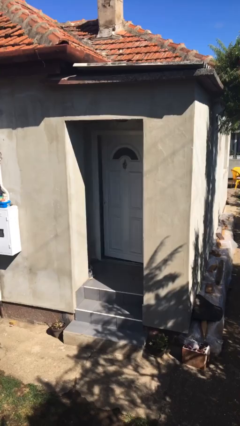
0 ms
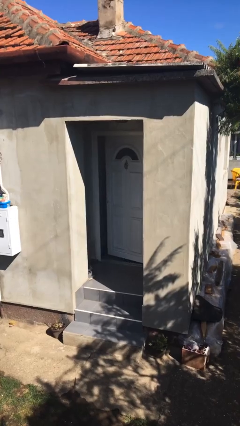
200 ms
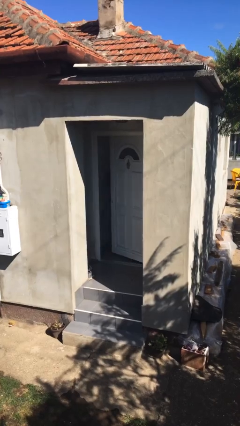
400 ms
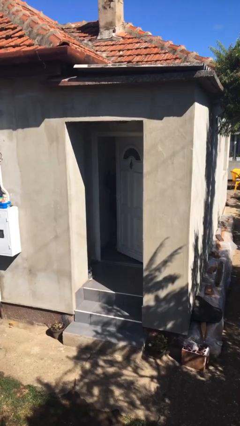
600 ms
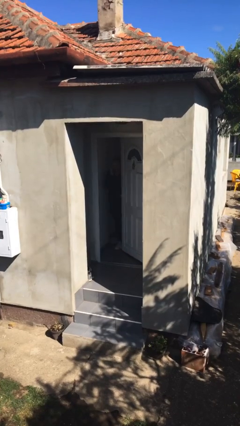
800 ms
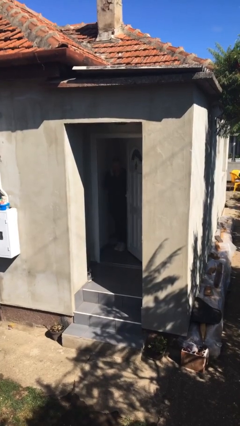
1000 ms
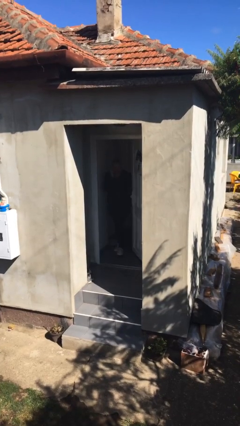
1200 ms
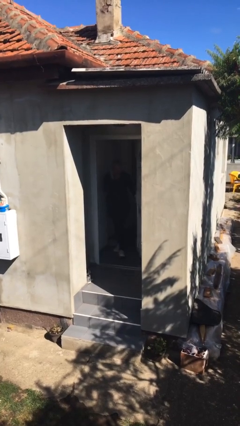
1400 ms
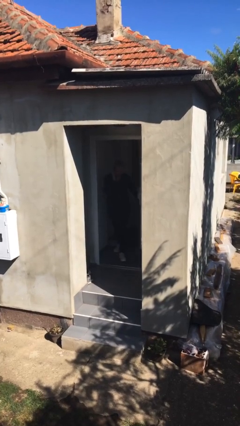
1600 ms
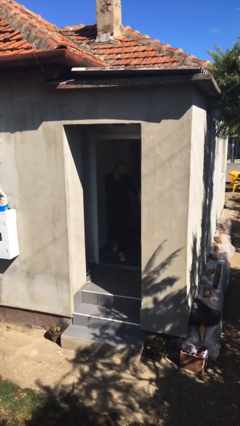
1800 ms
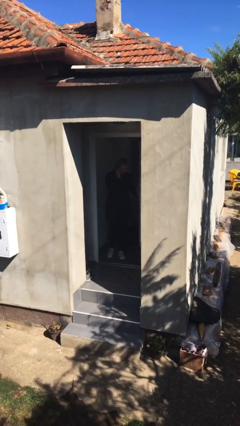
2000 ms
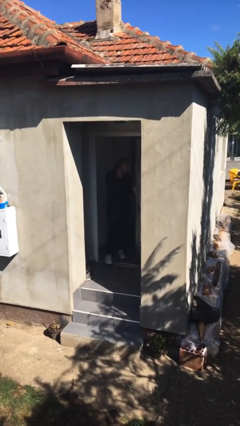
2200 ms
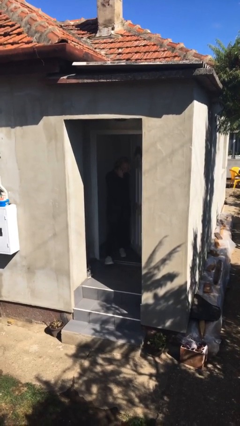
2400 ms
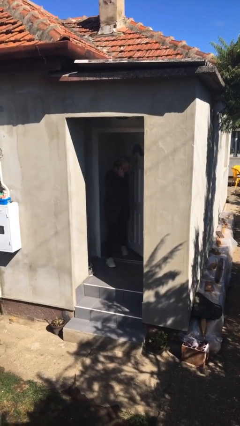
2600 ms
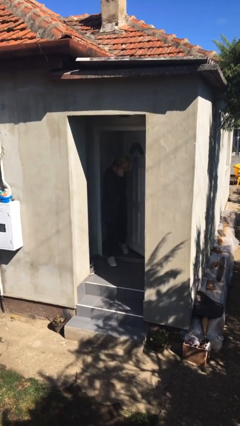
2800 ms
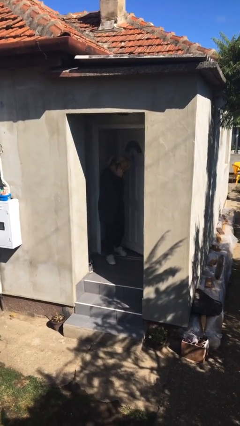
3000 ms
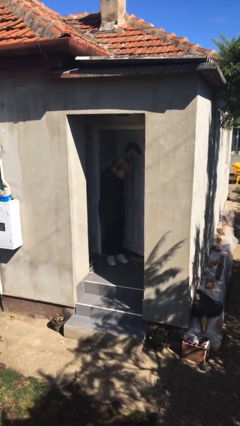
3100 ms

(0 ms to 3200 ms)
person opens facility door

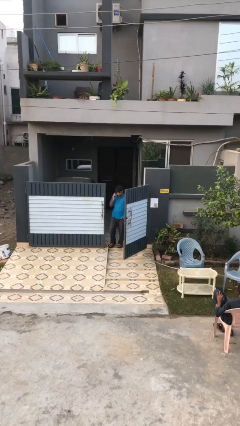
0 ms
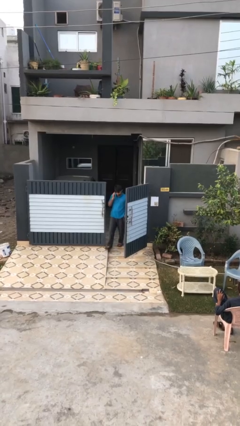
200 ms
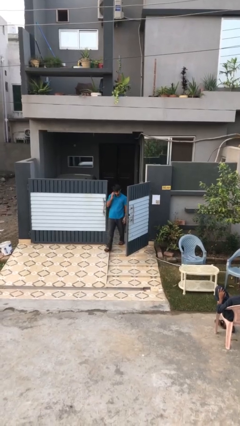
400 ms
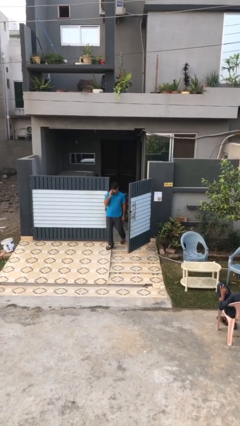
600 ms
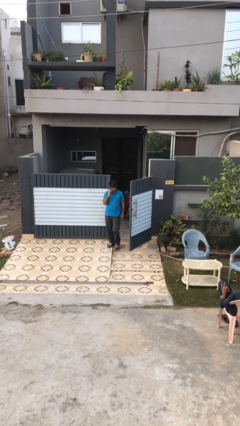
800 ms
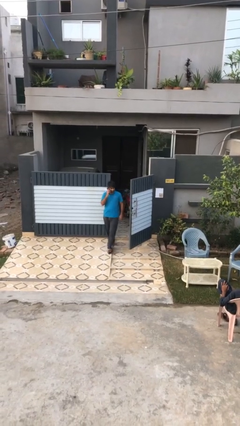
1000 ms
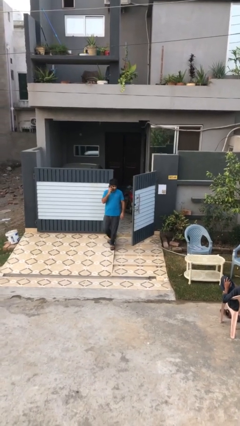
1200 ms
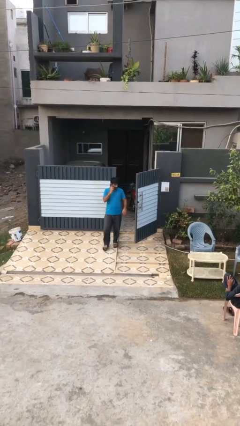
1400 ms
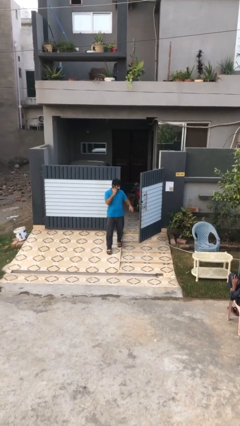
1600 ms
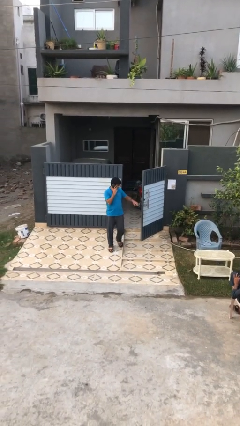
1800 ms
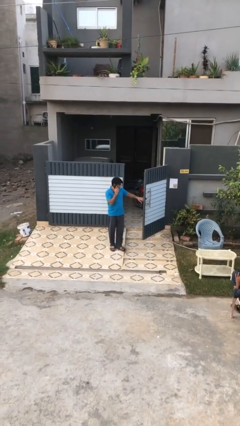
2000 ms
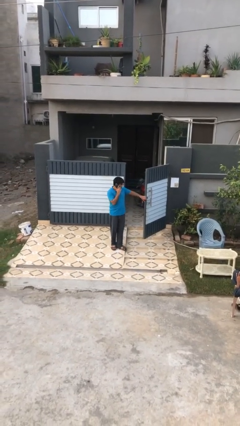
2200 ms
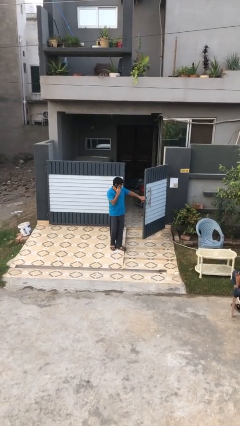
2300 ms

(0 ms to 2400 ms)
person enters scene through structure

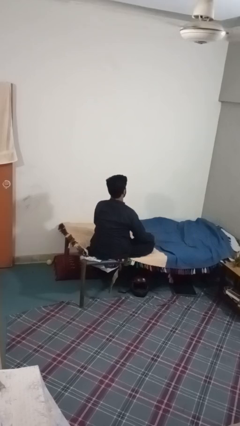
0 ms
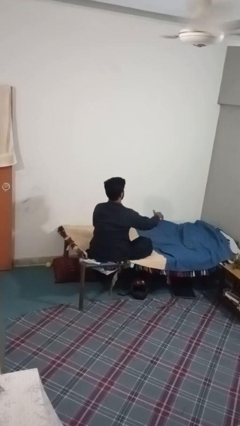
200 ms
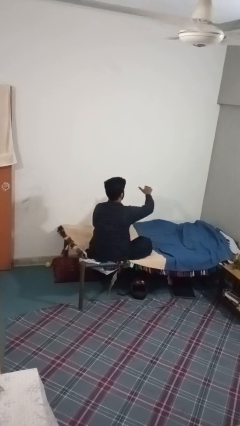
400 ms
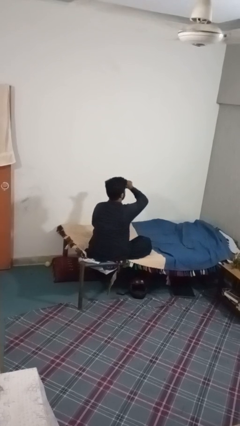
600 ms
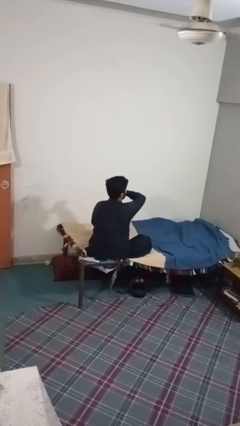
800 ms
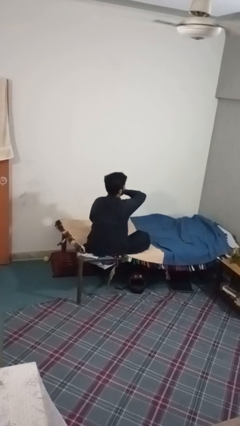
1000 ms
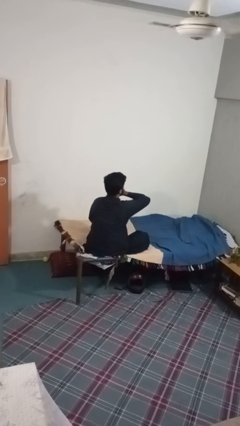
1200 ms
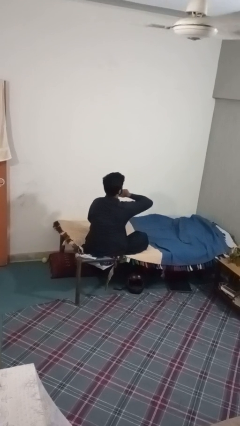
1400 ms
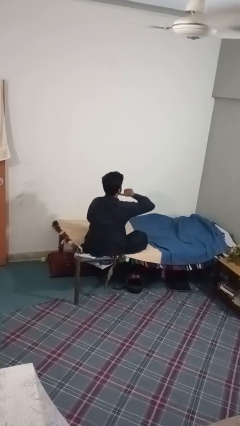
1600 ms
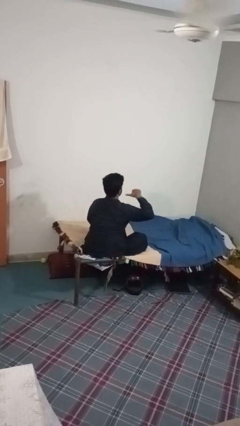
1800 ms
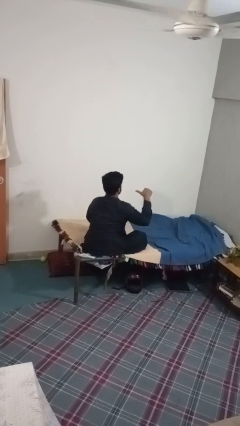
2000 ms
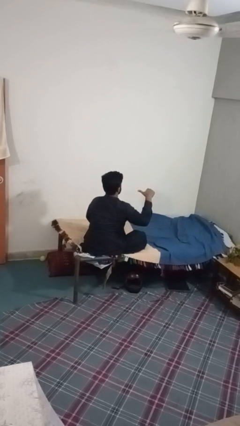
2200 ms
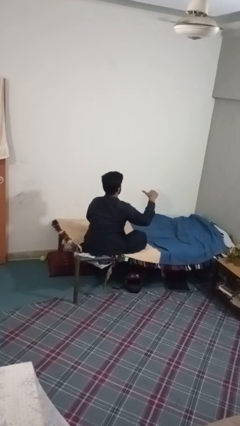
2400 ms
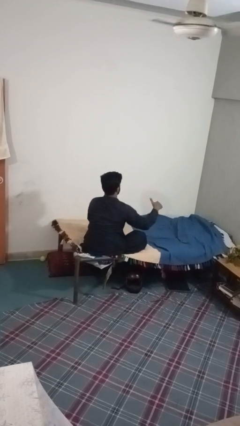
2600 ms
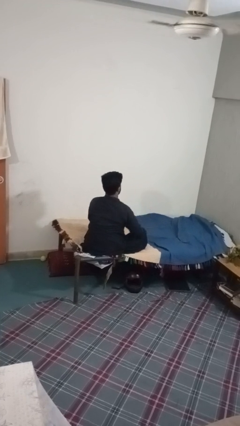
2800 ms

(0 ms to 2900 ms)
person gestures cut

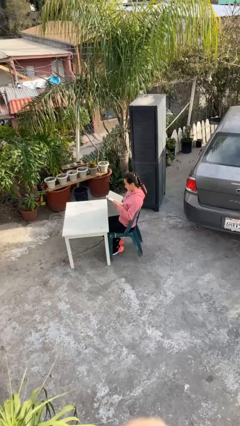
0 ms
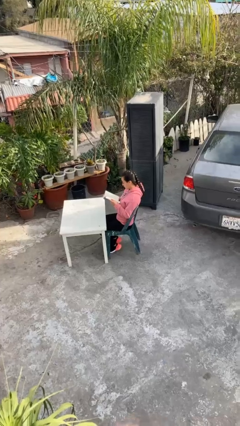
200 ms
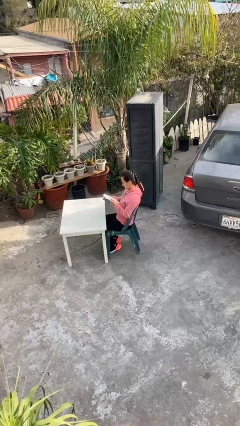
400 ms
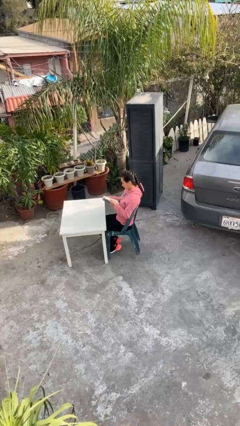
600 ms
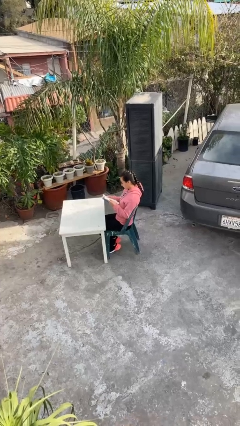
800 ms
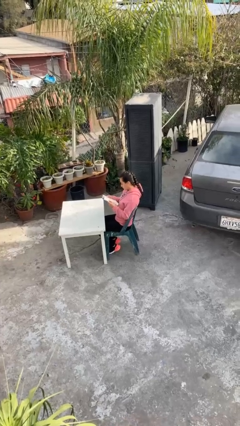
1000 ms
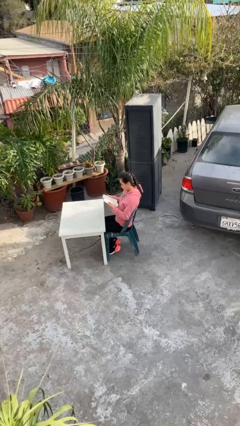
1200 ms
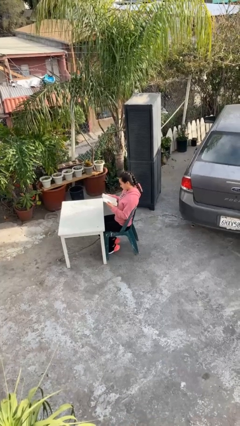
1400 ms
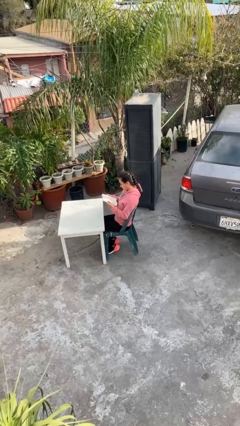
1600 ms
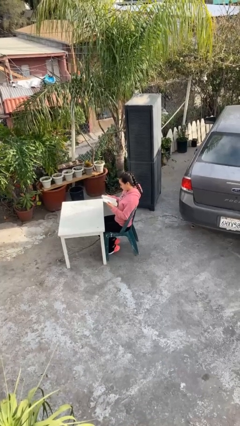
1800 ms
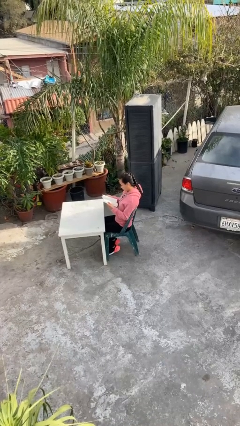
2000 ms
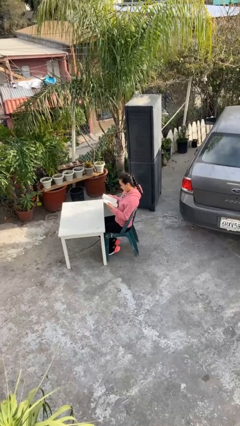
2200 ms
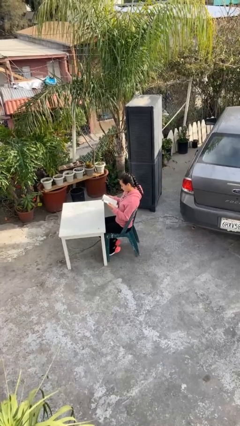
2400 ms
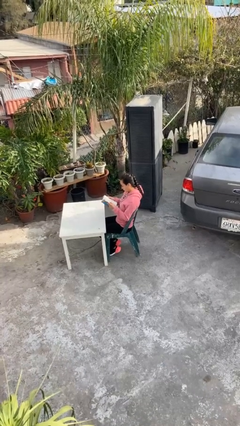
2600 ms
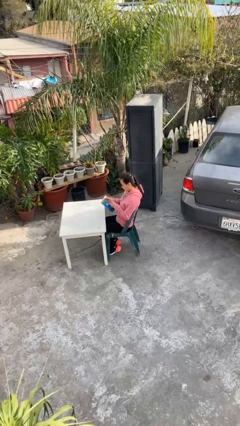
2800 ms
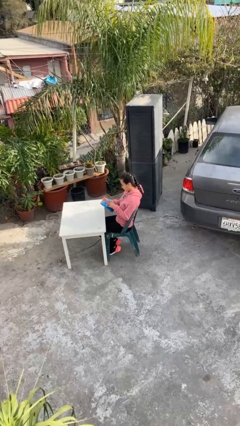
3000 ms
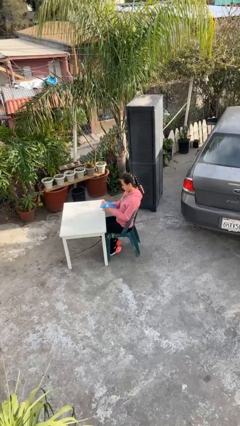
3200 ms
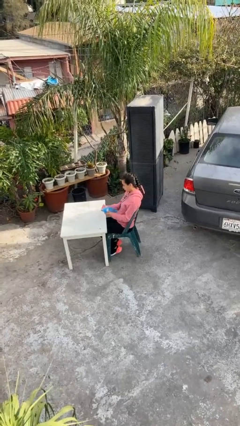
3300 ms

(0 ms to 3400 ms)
person reads document

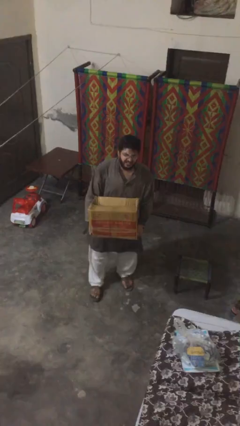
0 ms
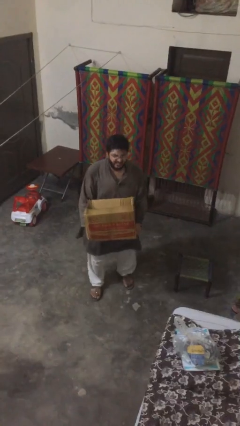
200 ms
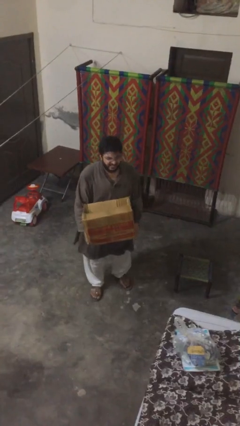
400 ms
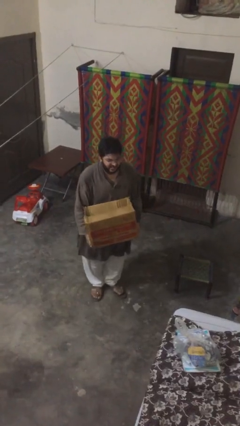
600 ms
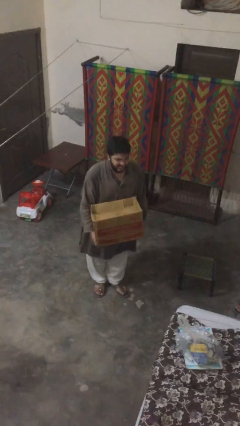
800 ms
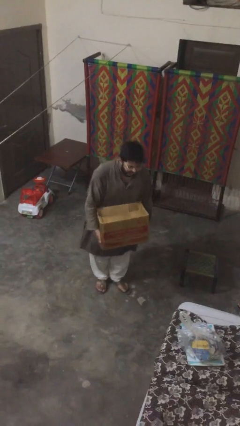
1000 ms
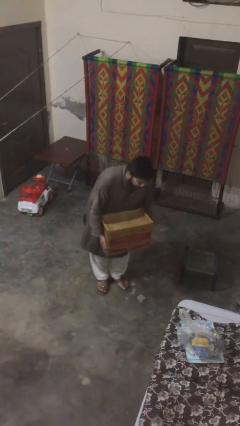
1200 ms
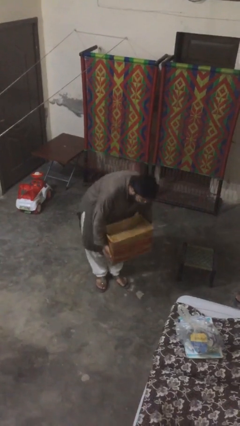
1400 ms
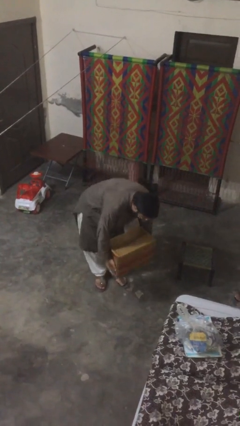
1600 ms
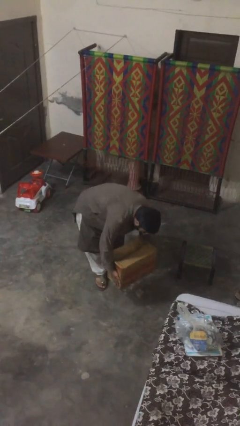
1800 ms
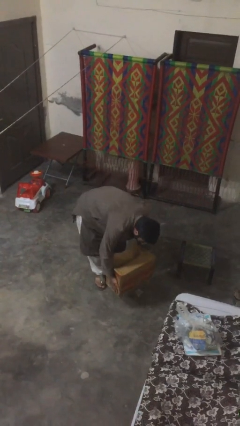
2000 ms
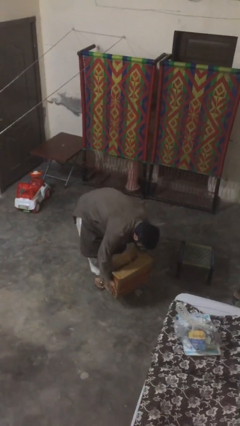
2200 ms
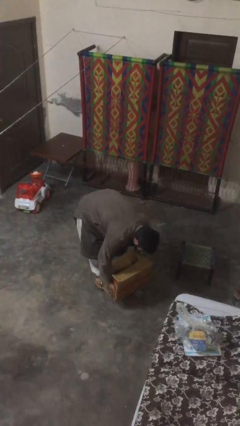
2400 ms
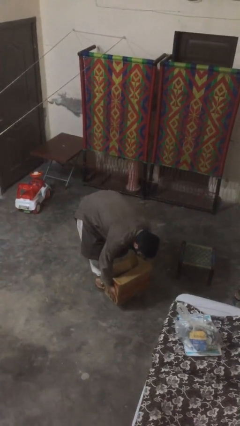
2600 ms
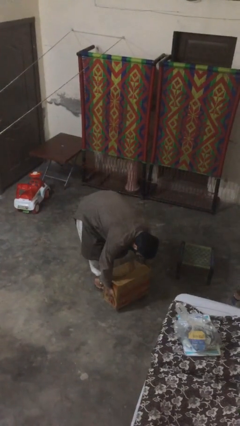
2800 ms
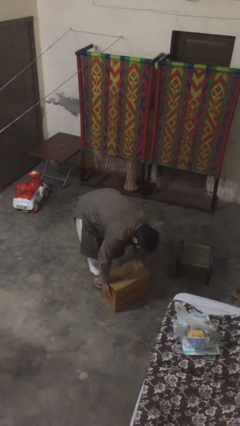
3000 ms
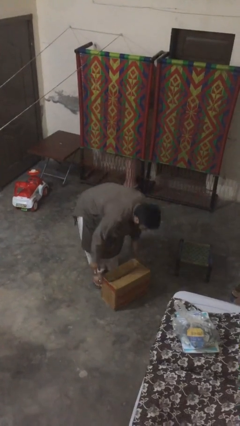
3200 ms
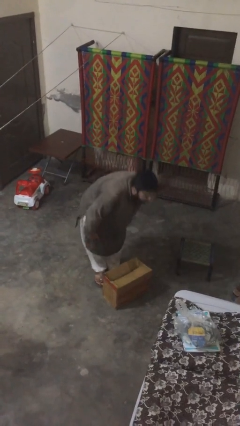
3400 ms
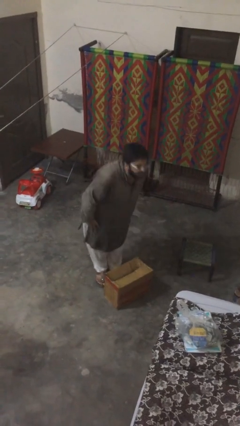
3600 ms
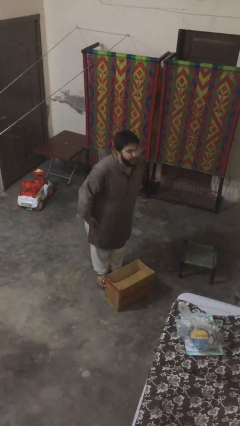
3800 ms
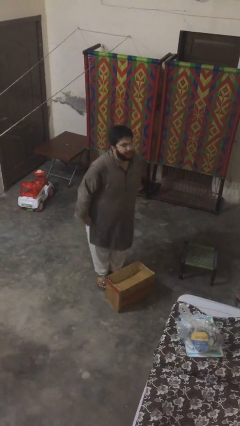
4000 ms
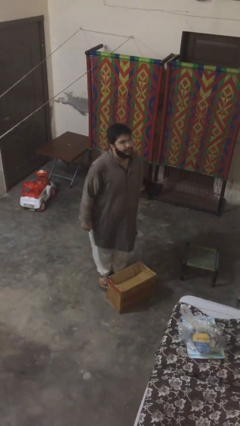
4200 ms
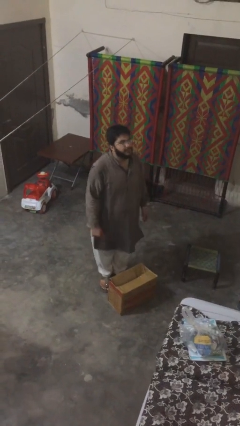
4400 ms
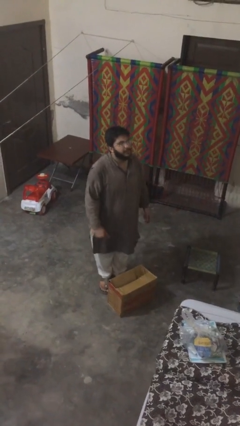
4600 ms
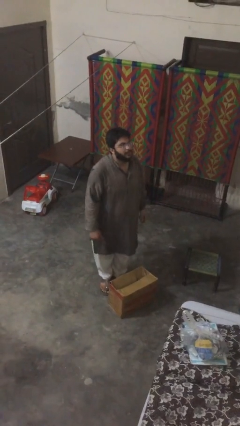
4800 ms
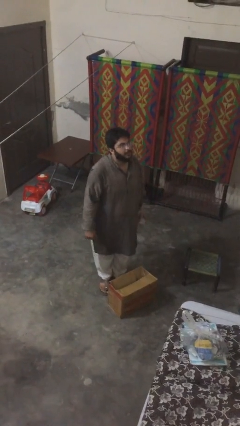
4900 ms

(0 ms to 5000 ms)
person puts down object on floor

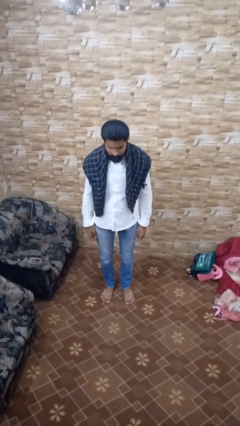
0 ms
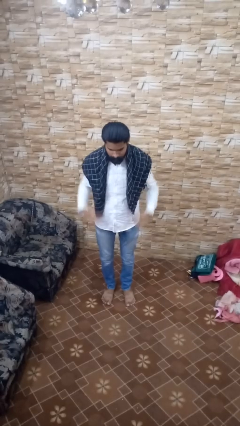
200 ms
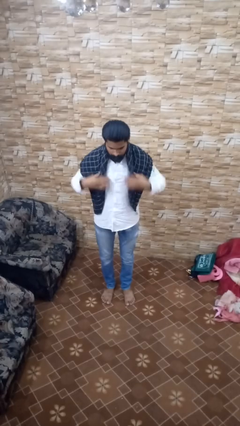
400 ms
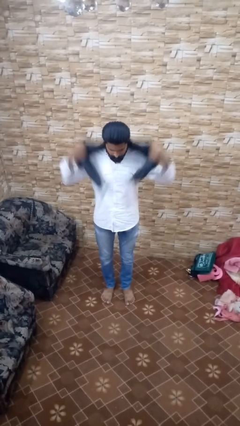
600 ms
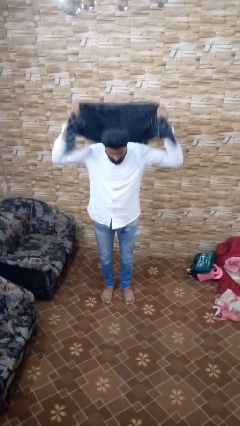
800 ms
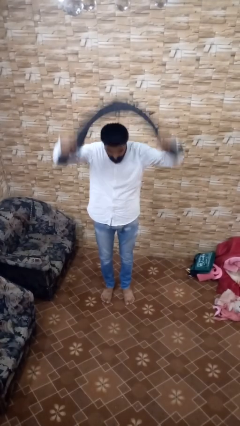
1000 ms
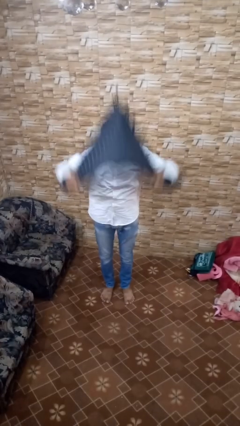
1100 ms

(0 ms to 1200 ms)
person takes off scarf
